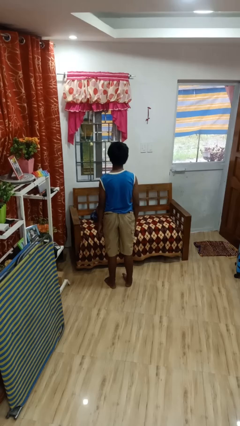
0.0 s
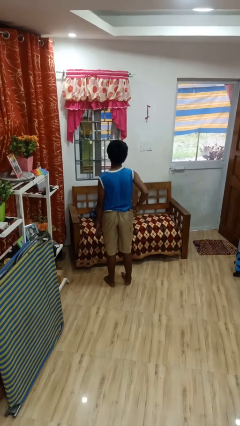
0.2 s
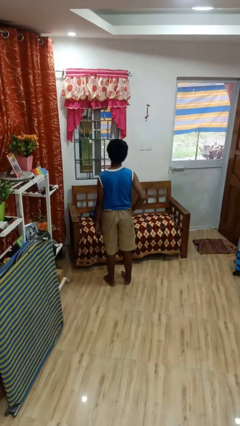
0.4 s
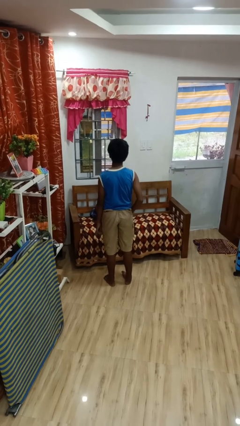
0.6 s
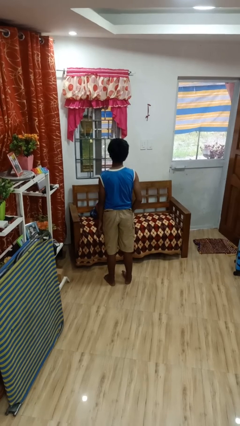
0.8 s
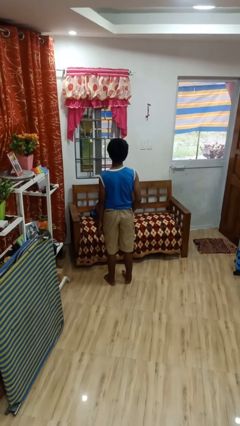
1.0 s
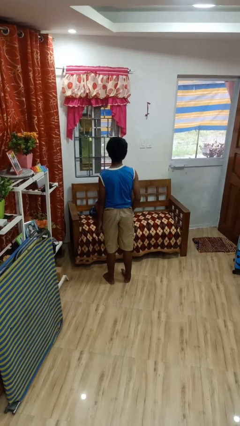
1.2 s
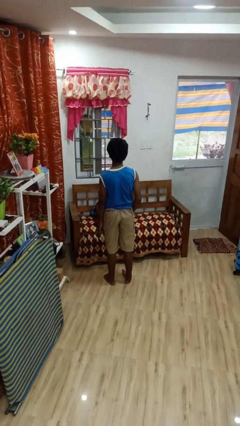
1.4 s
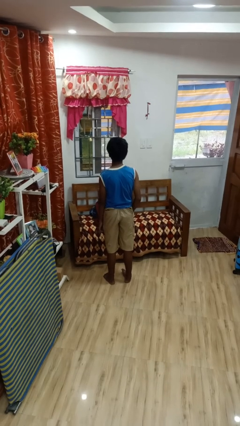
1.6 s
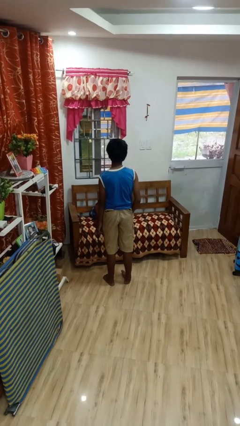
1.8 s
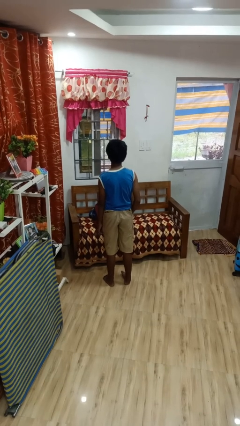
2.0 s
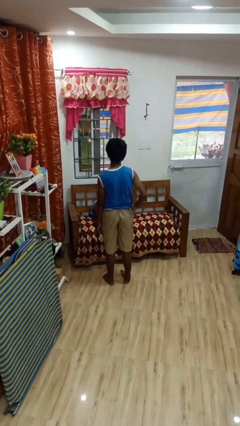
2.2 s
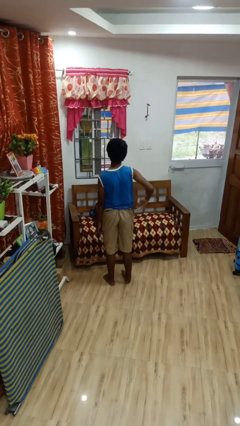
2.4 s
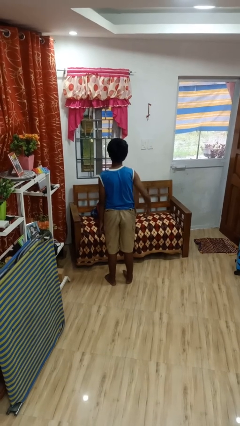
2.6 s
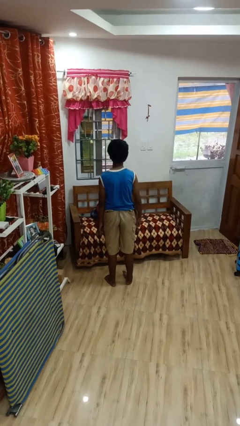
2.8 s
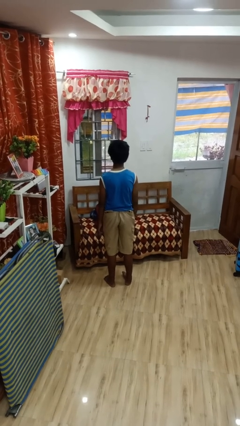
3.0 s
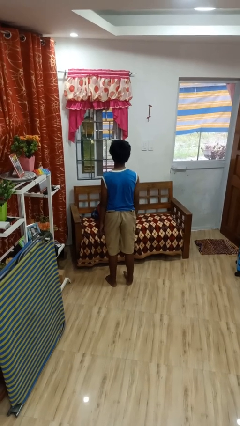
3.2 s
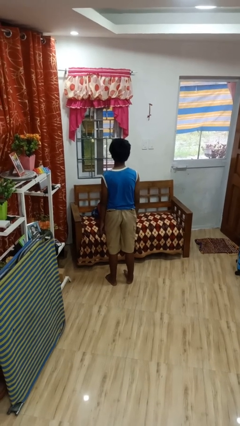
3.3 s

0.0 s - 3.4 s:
person puts hands in back pockets

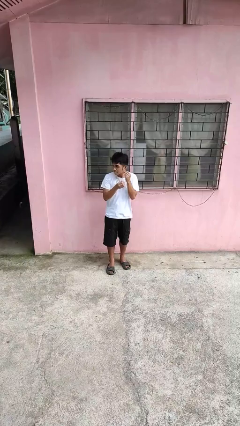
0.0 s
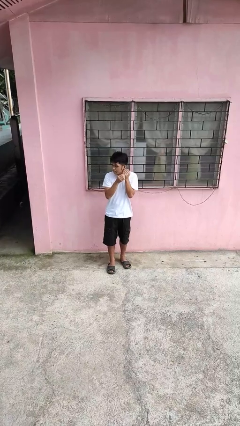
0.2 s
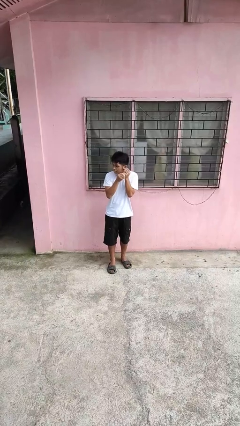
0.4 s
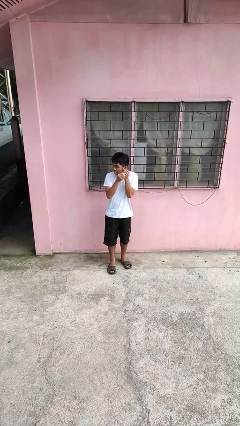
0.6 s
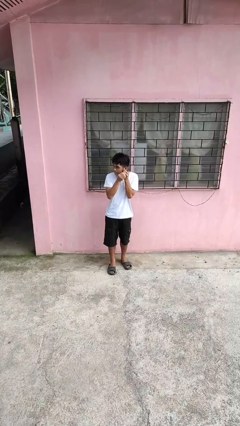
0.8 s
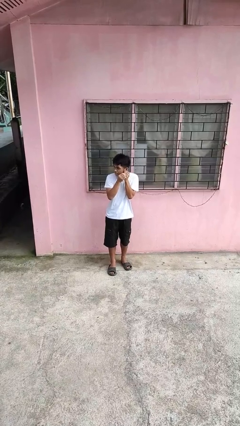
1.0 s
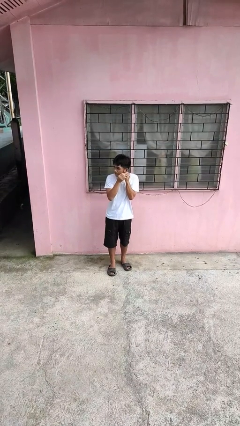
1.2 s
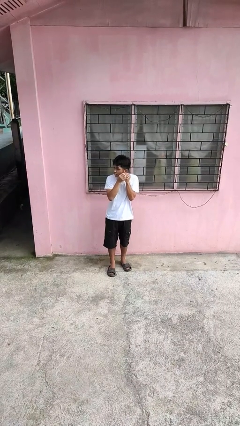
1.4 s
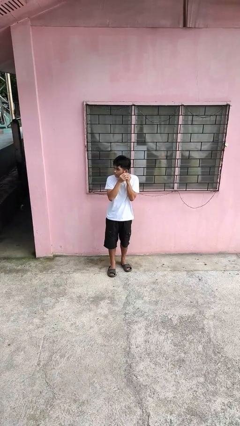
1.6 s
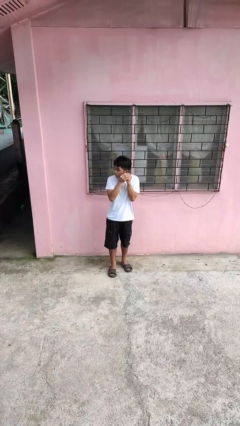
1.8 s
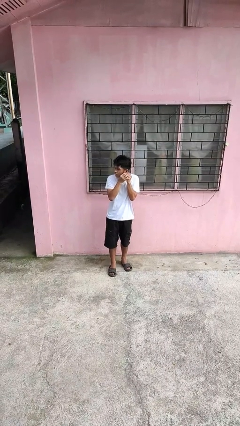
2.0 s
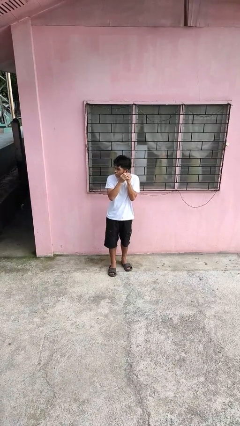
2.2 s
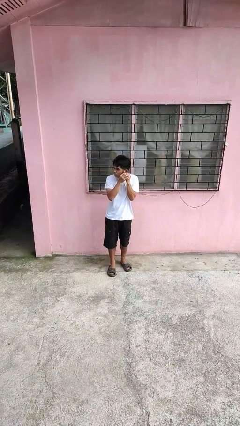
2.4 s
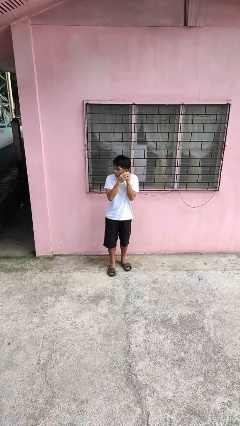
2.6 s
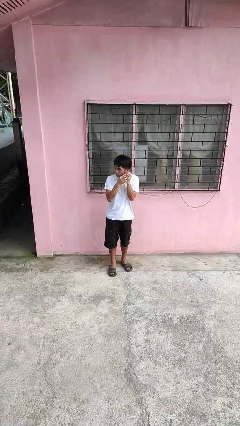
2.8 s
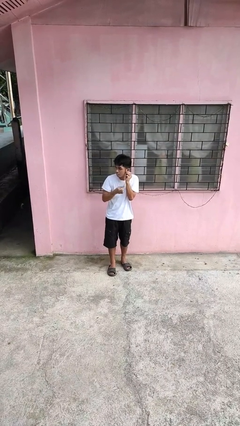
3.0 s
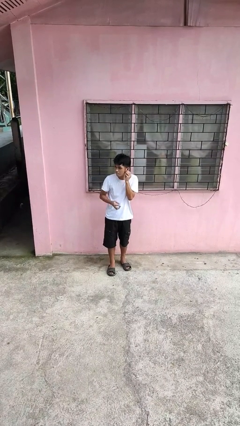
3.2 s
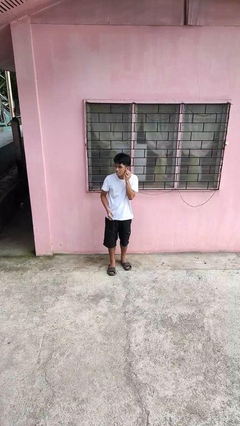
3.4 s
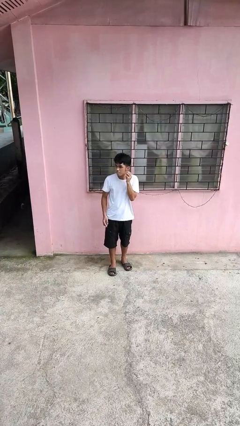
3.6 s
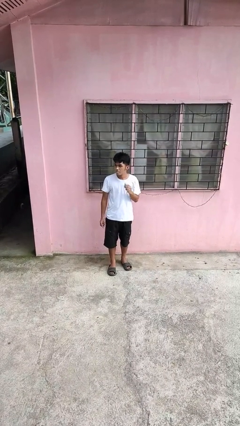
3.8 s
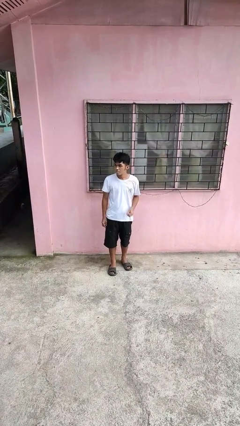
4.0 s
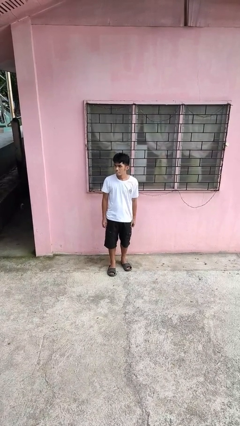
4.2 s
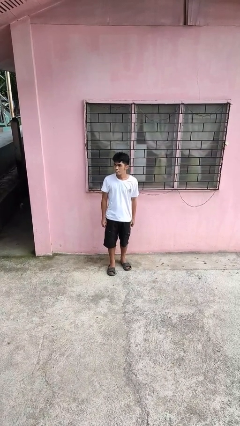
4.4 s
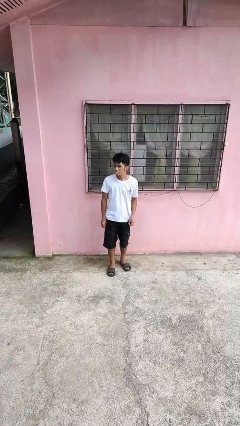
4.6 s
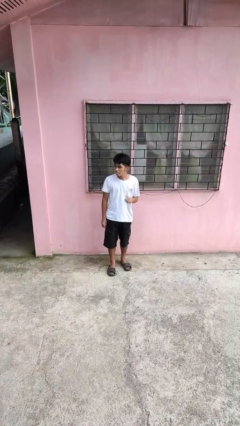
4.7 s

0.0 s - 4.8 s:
person puts on earrings

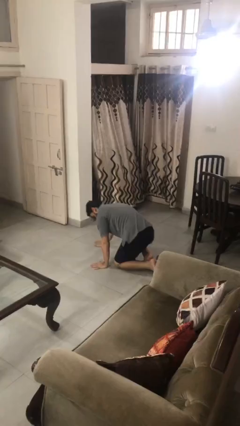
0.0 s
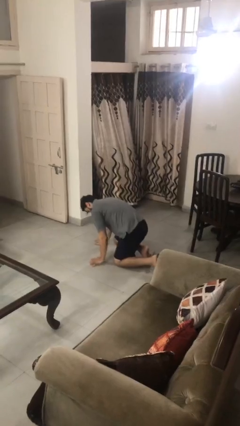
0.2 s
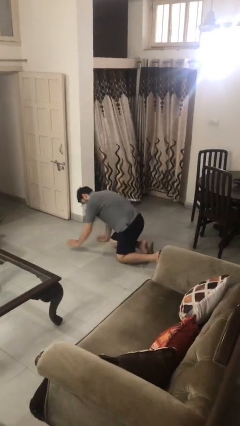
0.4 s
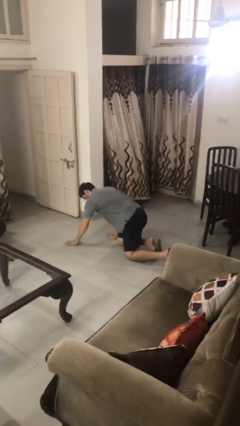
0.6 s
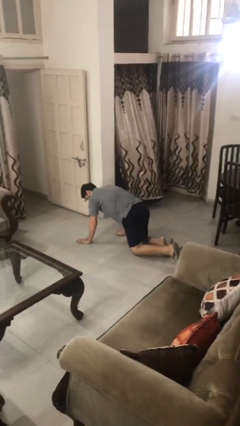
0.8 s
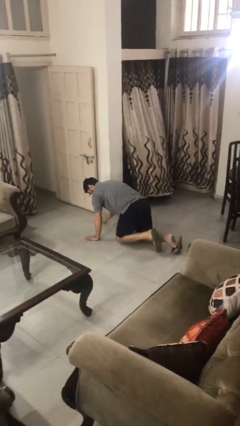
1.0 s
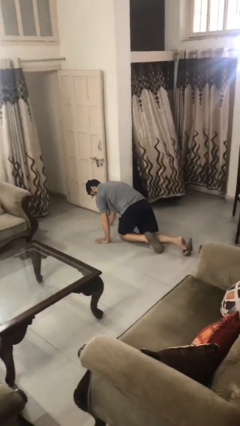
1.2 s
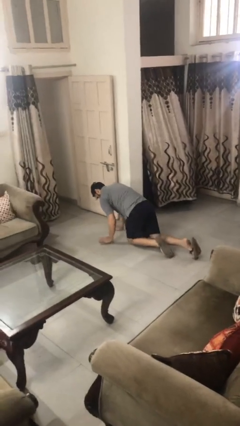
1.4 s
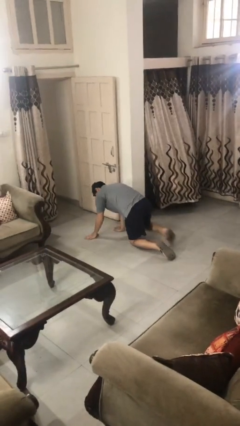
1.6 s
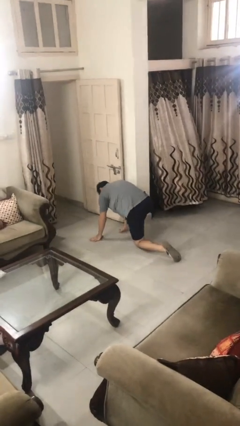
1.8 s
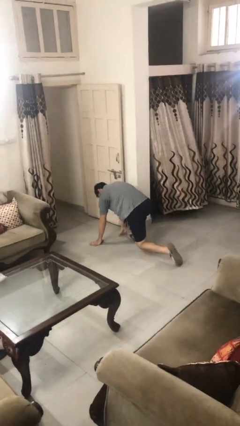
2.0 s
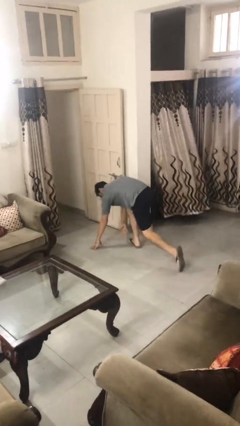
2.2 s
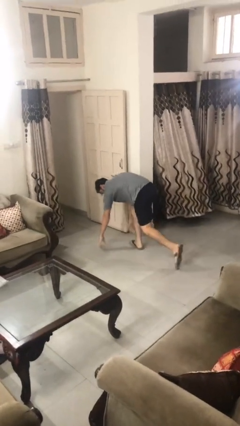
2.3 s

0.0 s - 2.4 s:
person crawls

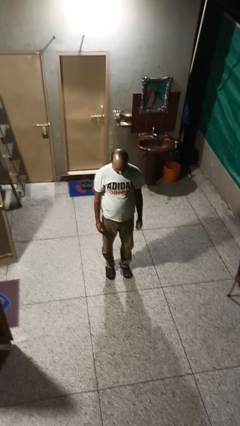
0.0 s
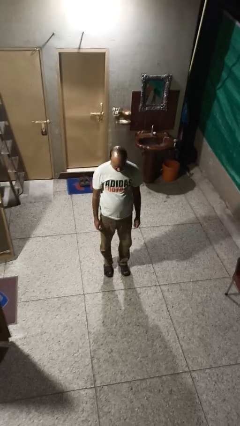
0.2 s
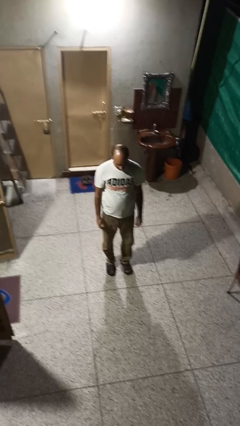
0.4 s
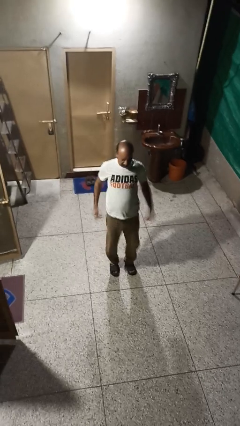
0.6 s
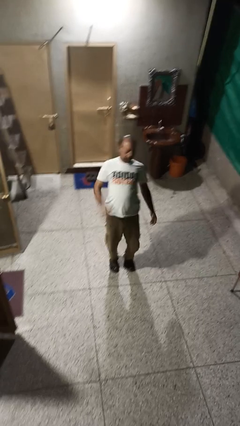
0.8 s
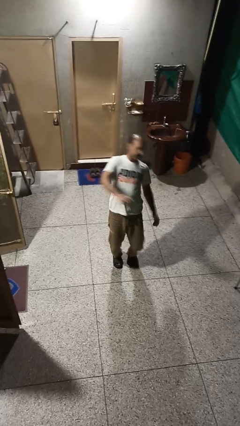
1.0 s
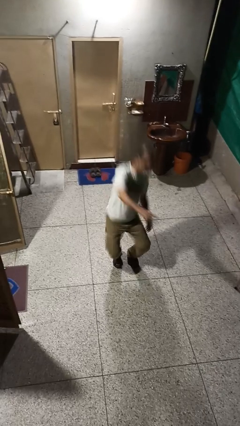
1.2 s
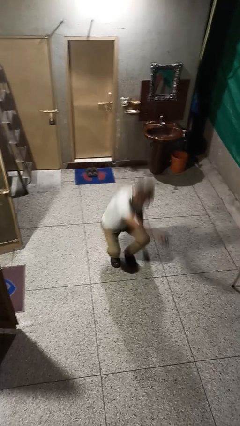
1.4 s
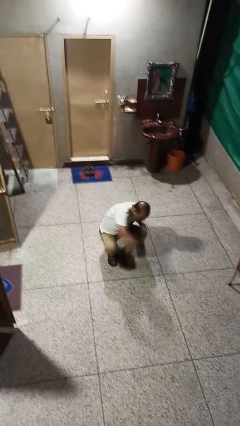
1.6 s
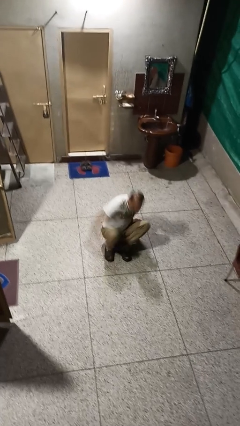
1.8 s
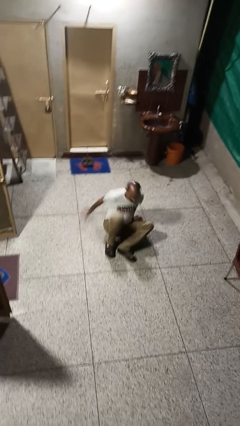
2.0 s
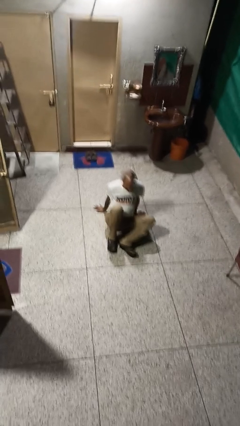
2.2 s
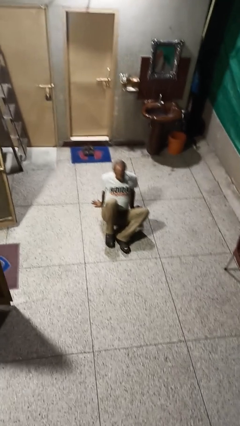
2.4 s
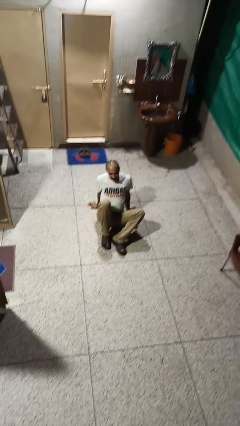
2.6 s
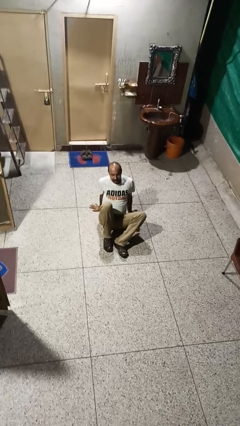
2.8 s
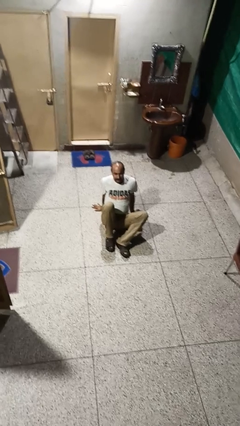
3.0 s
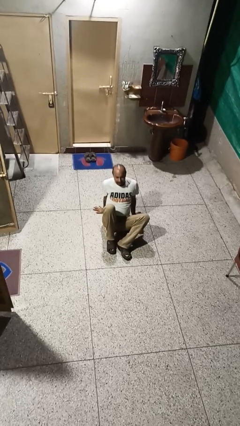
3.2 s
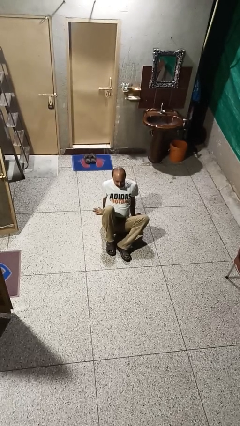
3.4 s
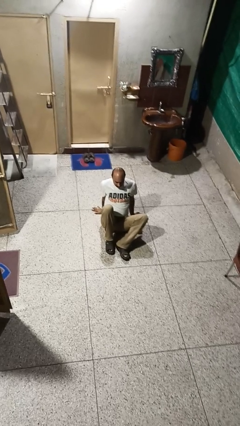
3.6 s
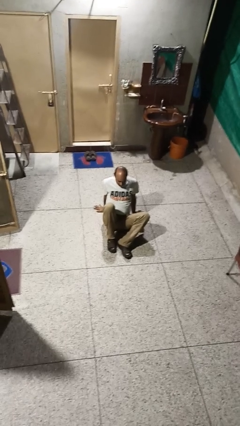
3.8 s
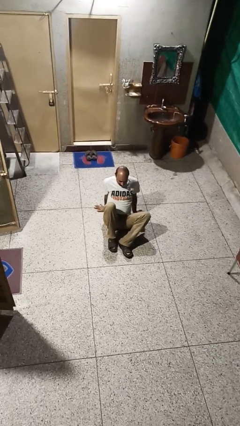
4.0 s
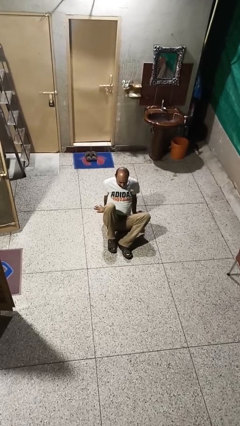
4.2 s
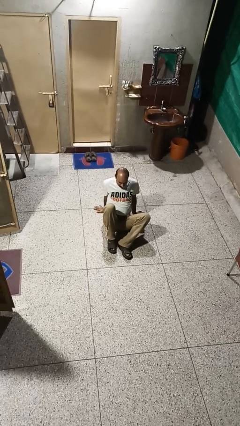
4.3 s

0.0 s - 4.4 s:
person falls while standing

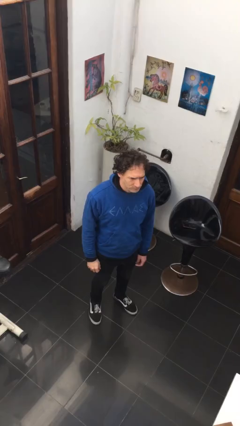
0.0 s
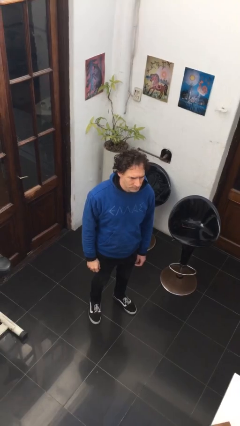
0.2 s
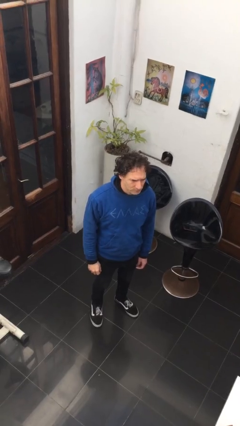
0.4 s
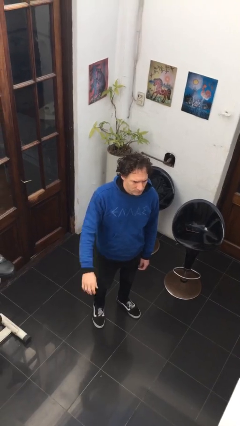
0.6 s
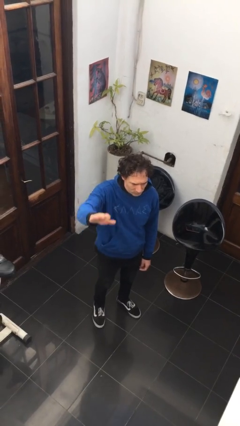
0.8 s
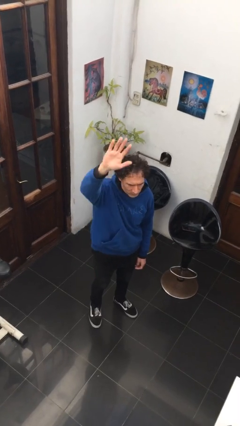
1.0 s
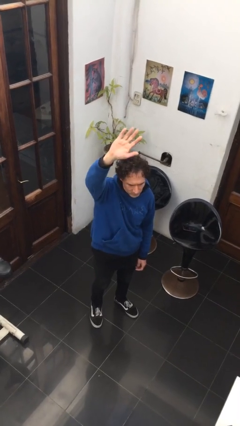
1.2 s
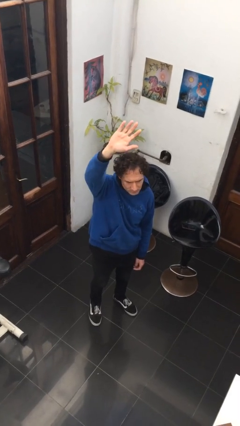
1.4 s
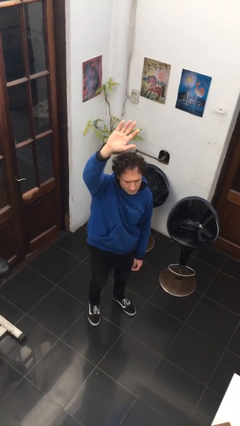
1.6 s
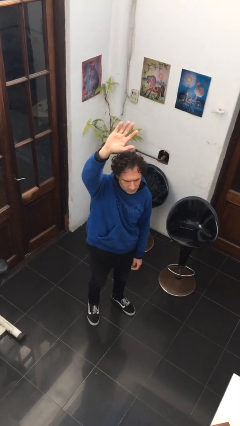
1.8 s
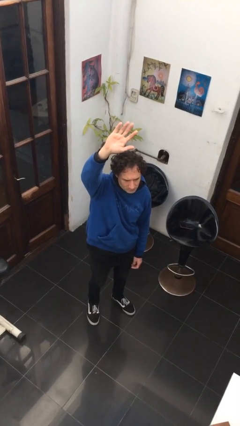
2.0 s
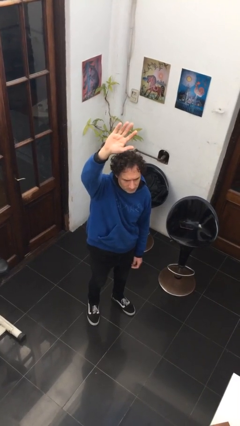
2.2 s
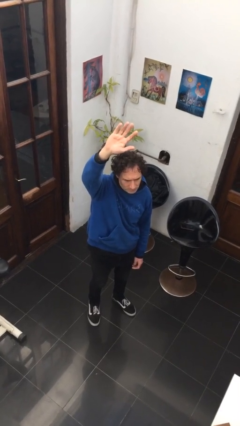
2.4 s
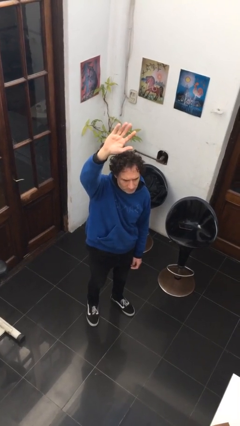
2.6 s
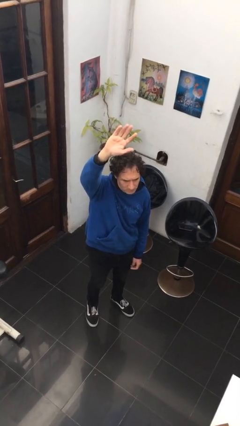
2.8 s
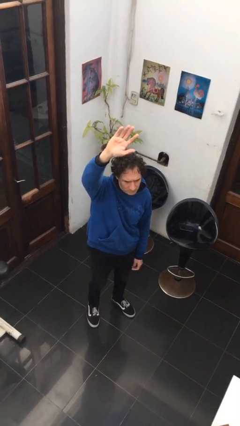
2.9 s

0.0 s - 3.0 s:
person gestures raise hand
